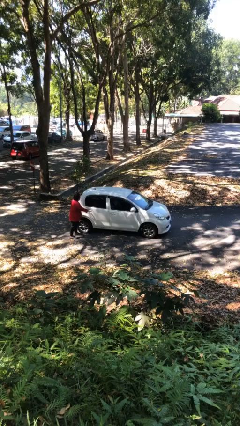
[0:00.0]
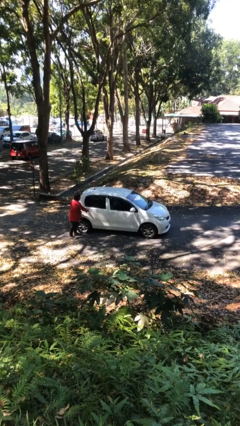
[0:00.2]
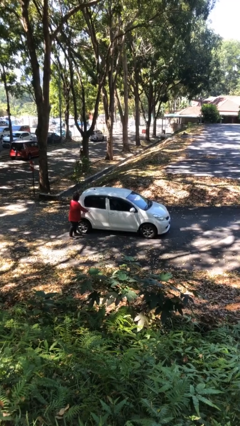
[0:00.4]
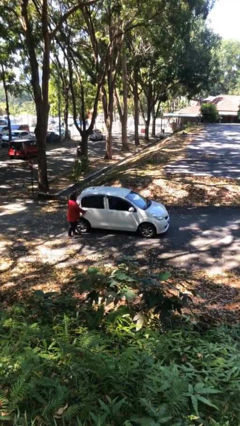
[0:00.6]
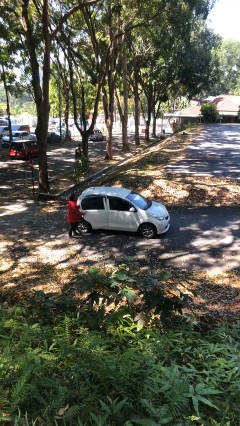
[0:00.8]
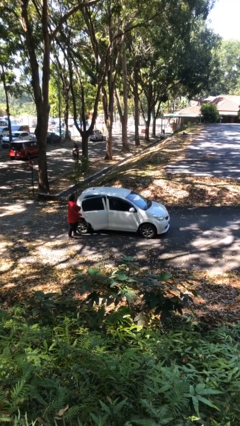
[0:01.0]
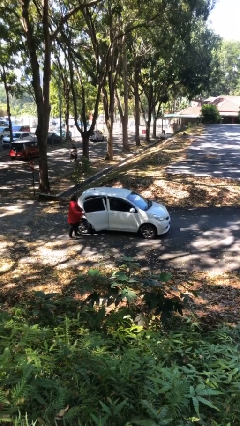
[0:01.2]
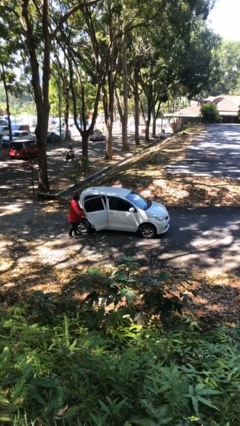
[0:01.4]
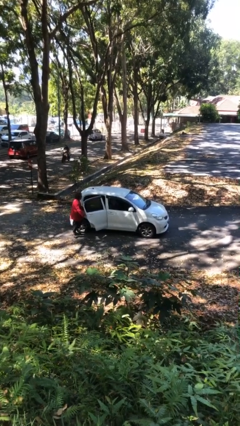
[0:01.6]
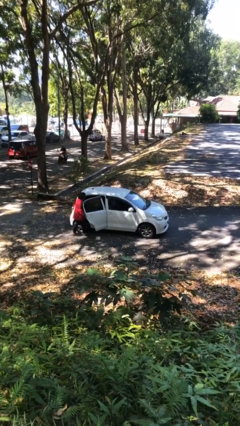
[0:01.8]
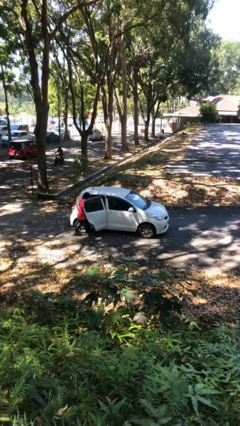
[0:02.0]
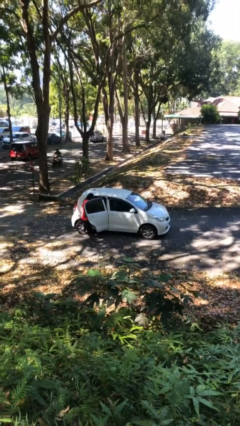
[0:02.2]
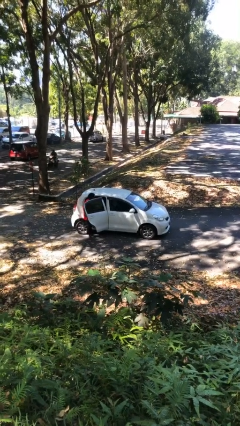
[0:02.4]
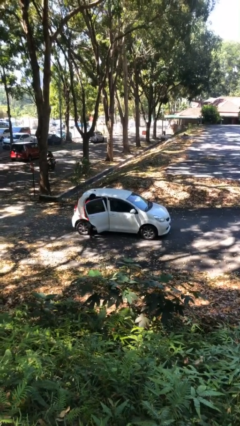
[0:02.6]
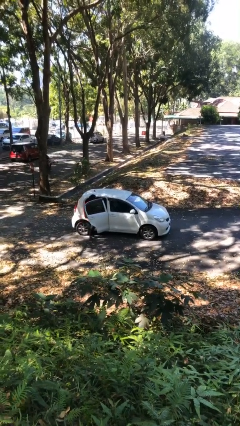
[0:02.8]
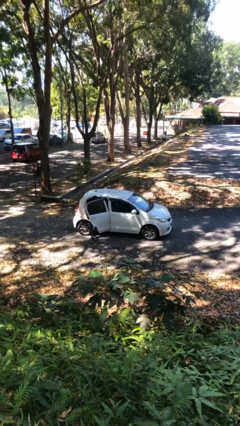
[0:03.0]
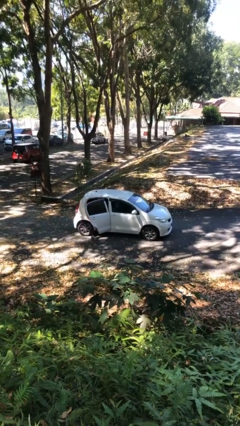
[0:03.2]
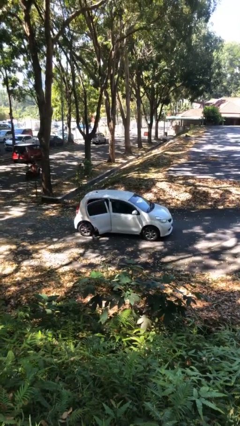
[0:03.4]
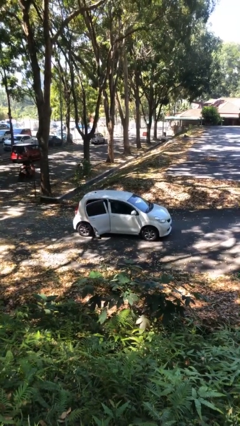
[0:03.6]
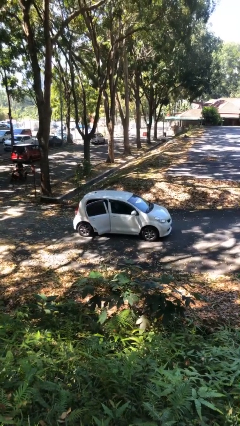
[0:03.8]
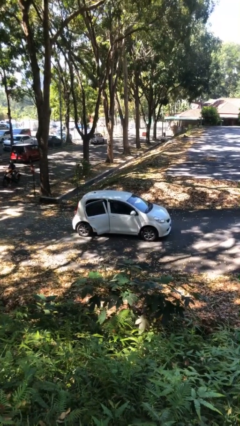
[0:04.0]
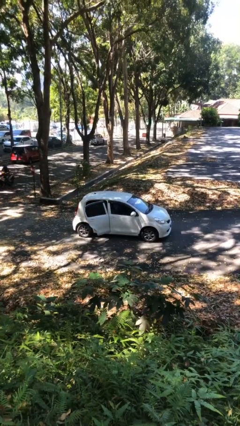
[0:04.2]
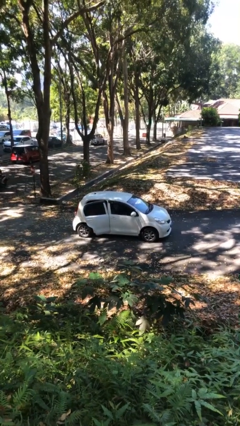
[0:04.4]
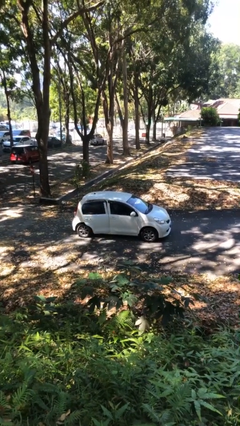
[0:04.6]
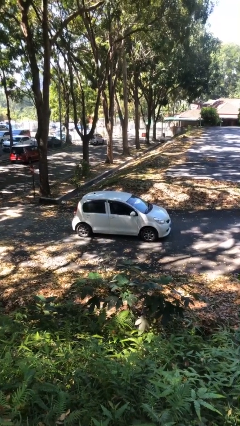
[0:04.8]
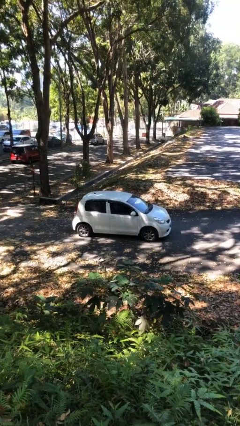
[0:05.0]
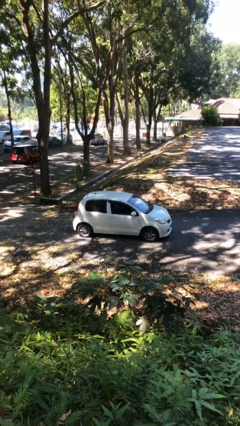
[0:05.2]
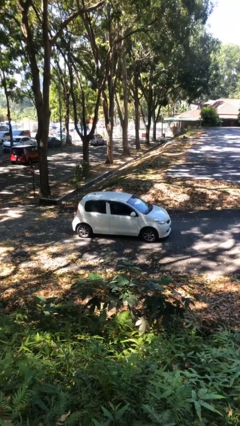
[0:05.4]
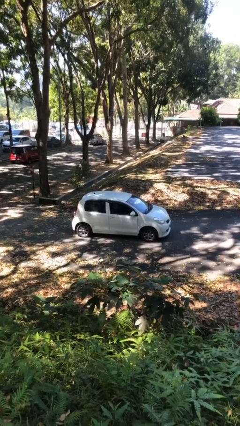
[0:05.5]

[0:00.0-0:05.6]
car picks up person

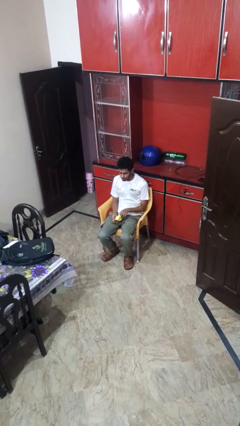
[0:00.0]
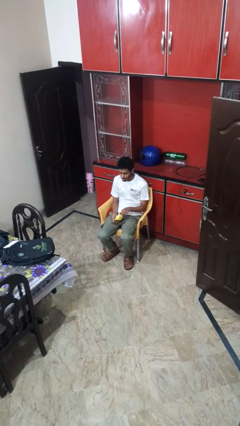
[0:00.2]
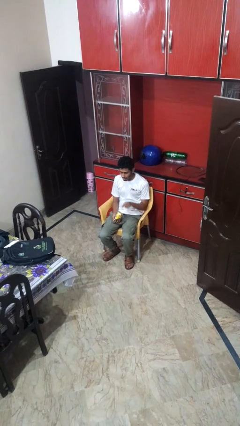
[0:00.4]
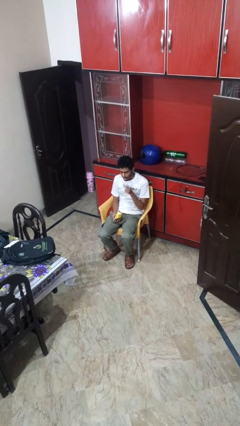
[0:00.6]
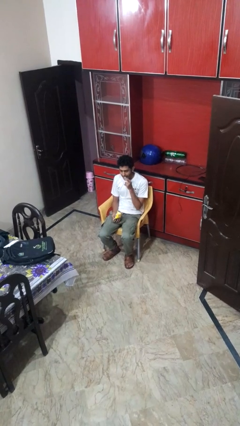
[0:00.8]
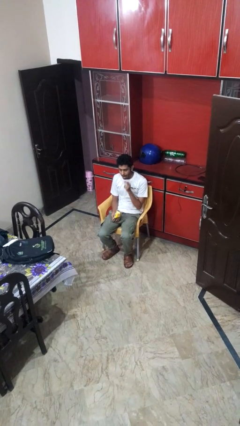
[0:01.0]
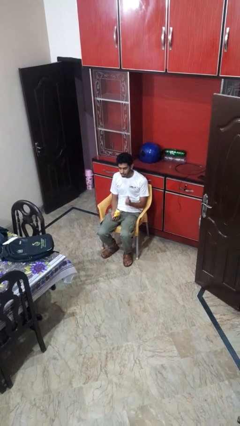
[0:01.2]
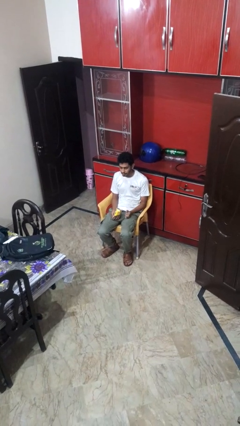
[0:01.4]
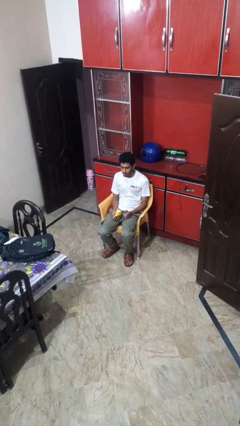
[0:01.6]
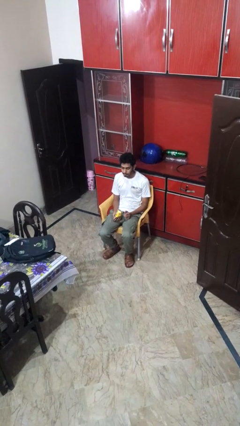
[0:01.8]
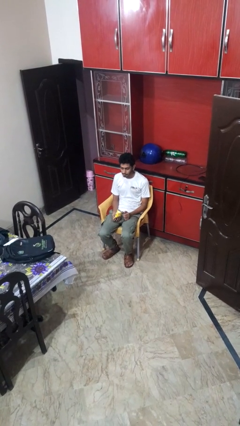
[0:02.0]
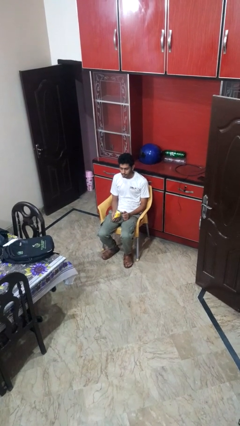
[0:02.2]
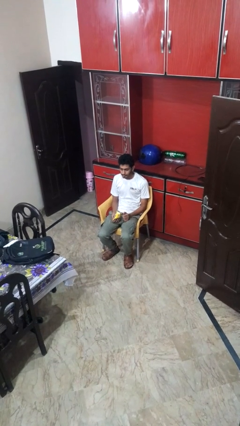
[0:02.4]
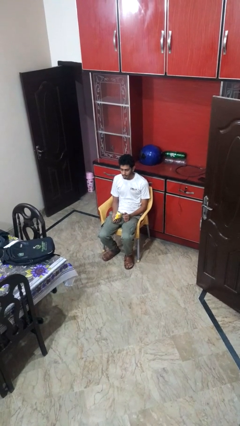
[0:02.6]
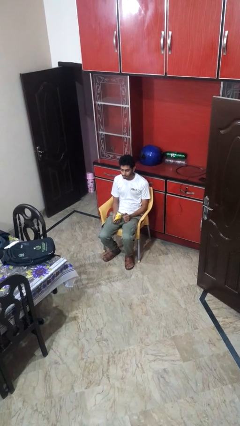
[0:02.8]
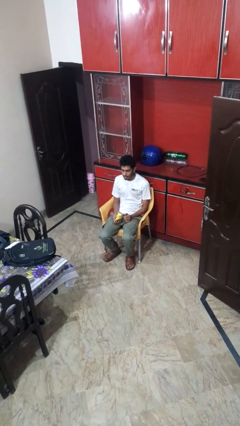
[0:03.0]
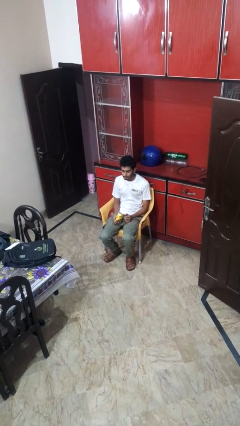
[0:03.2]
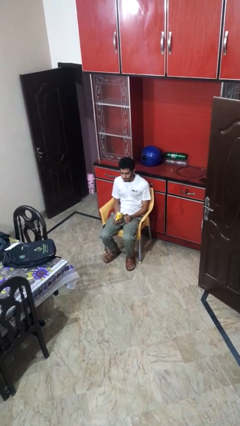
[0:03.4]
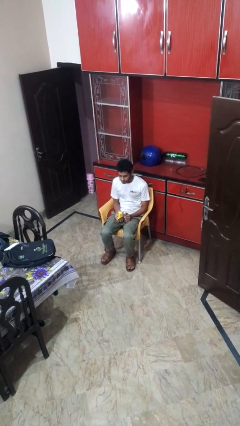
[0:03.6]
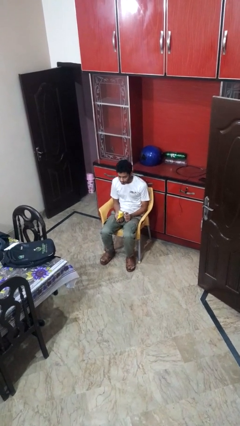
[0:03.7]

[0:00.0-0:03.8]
person eats snack from bag

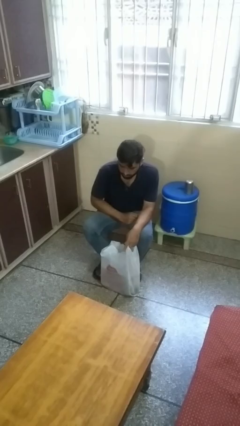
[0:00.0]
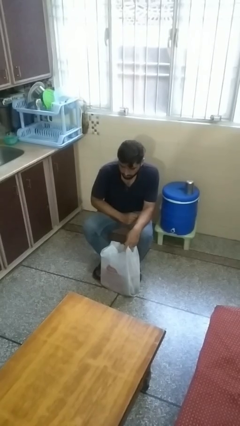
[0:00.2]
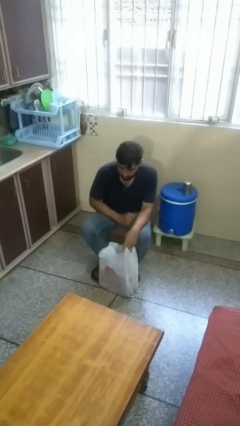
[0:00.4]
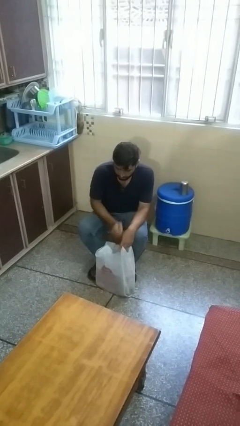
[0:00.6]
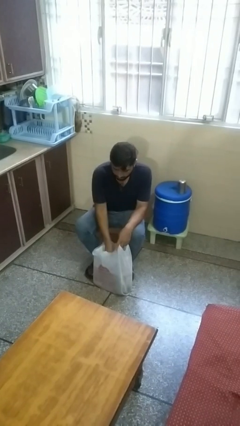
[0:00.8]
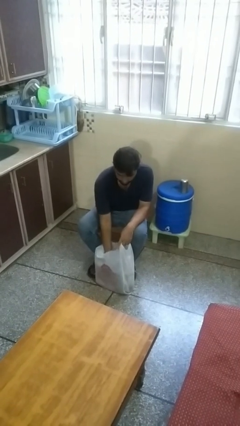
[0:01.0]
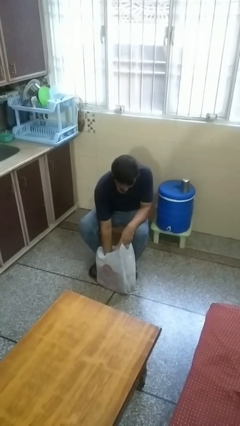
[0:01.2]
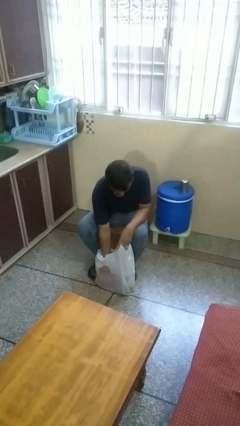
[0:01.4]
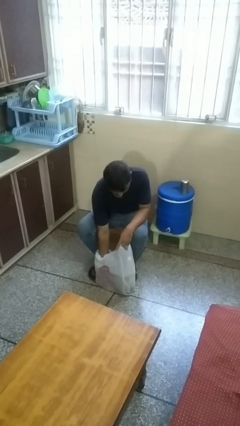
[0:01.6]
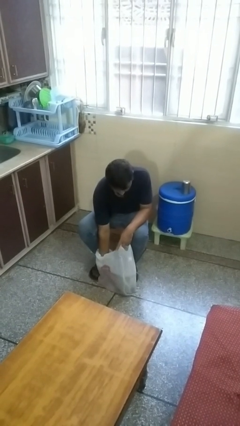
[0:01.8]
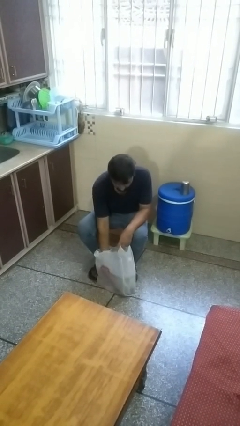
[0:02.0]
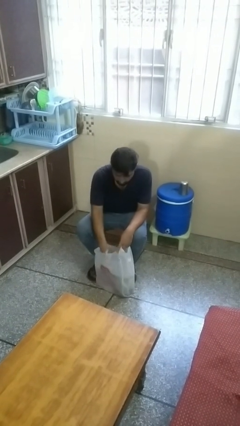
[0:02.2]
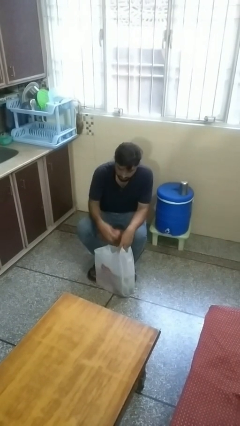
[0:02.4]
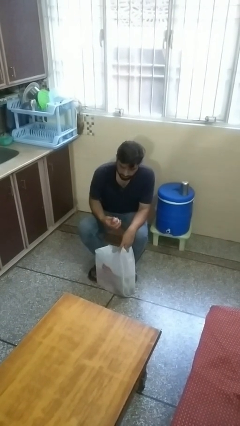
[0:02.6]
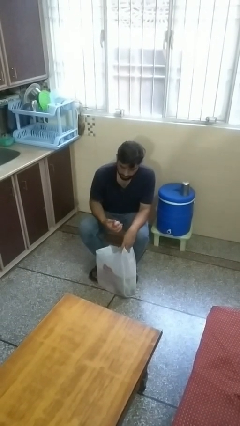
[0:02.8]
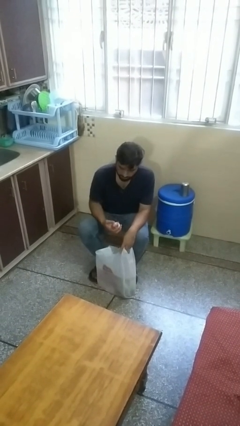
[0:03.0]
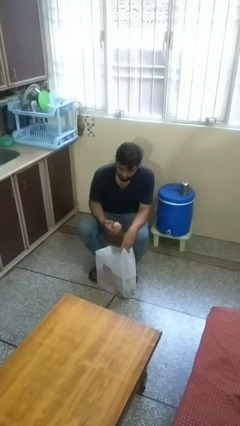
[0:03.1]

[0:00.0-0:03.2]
person takes object from bag

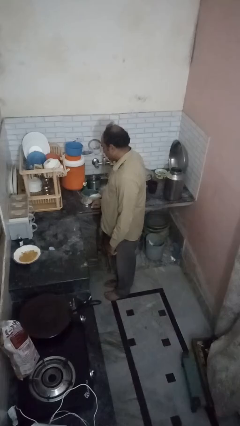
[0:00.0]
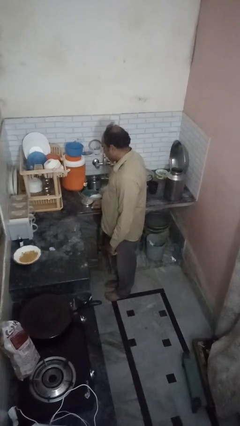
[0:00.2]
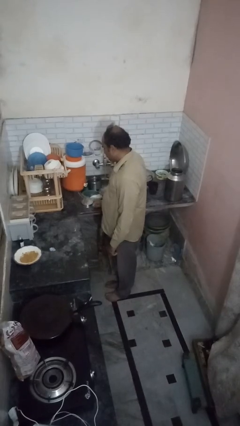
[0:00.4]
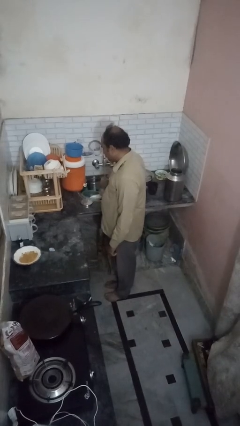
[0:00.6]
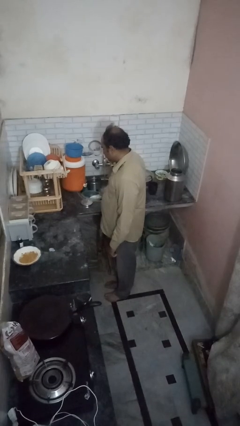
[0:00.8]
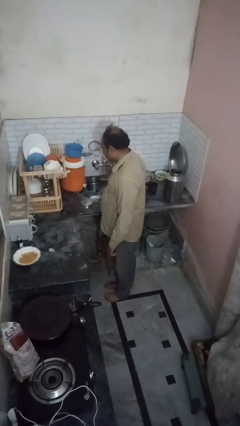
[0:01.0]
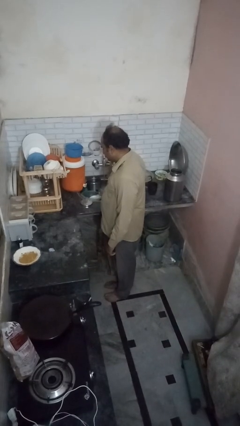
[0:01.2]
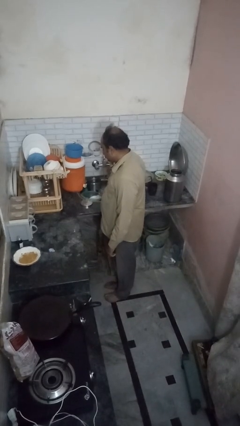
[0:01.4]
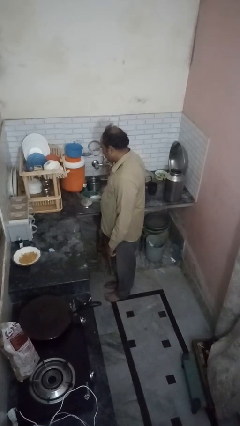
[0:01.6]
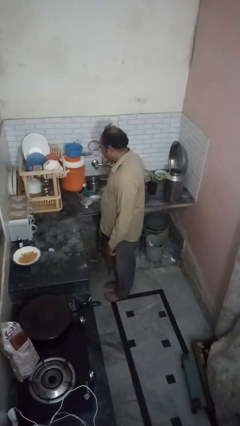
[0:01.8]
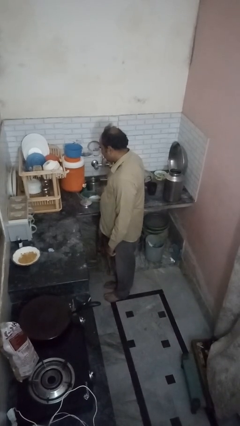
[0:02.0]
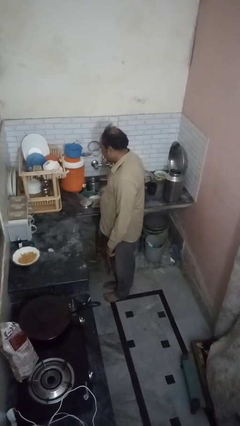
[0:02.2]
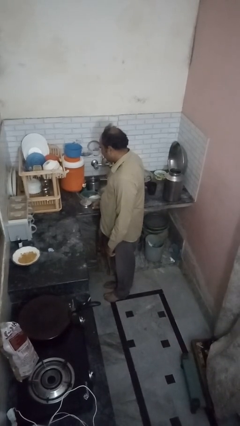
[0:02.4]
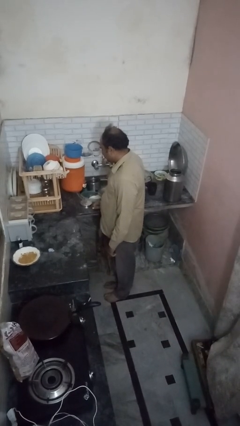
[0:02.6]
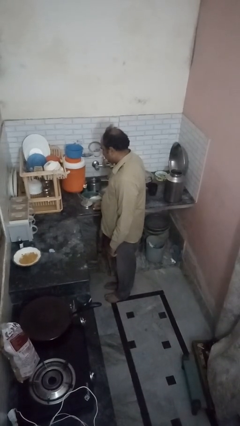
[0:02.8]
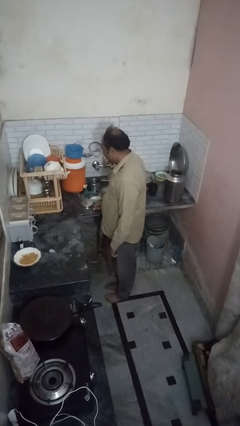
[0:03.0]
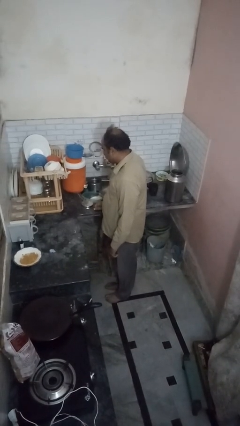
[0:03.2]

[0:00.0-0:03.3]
person closes dishwasher

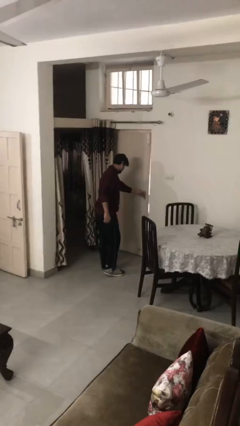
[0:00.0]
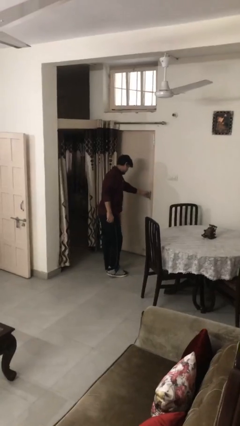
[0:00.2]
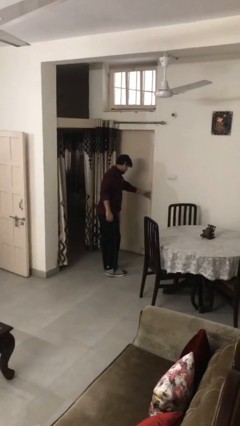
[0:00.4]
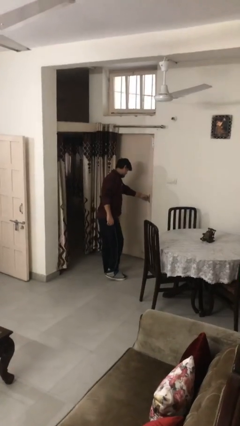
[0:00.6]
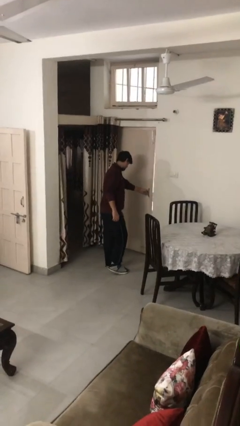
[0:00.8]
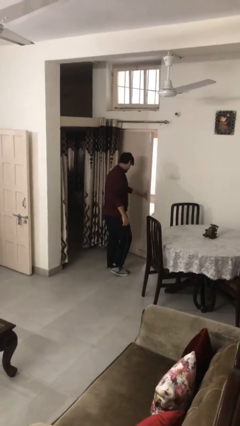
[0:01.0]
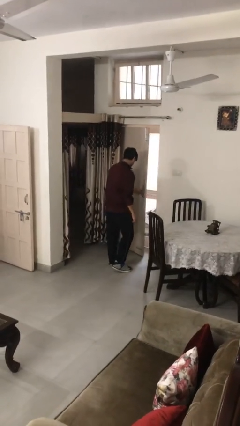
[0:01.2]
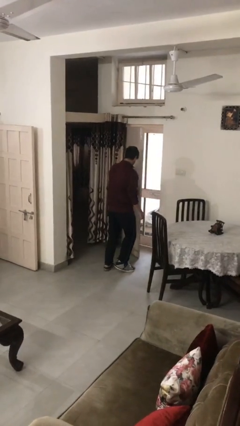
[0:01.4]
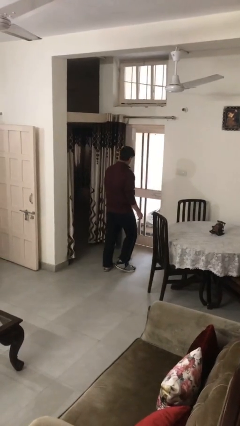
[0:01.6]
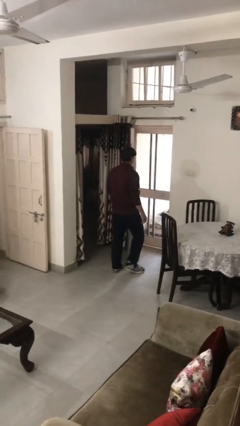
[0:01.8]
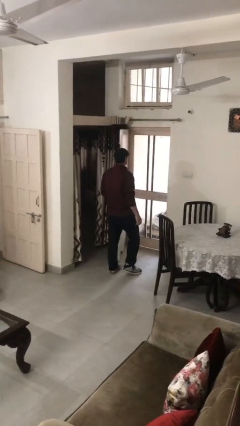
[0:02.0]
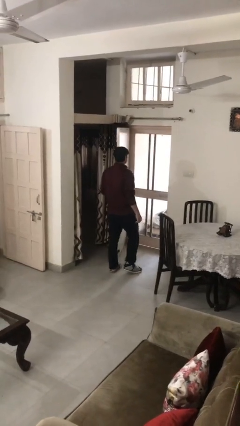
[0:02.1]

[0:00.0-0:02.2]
person opens facility door

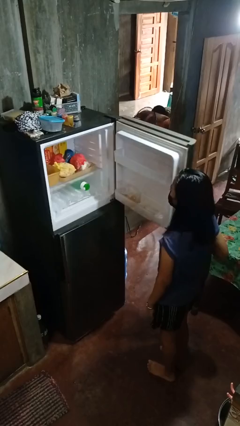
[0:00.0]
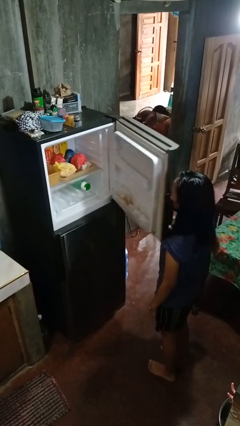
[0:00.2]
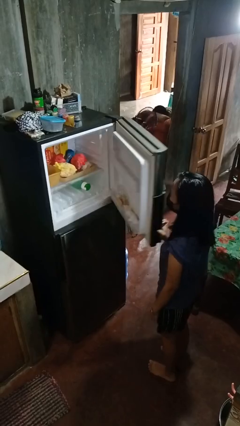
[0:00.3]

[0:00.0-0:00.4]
person closes refrigerator
